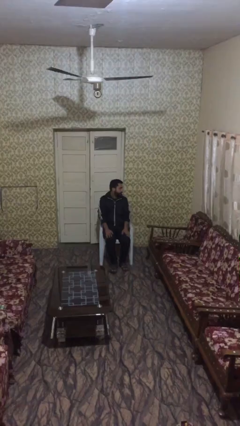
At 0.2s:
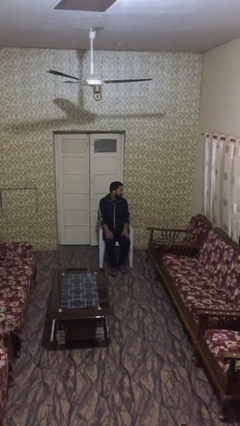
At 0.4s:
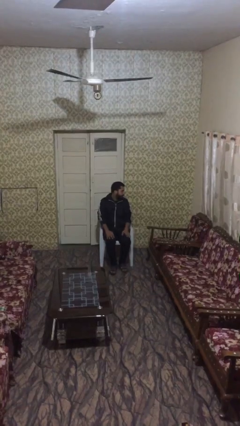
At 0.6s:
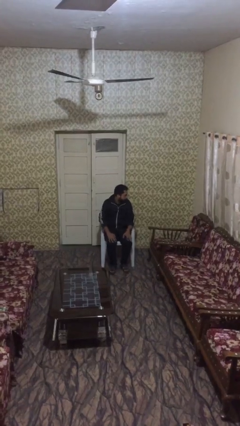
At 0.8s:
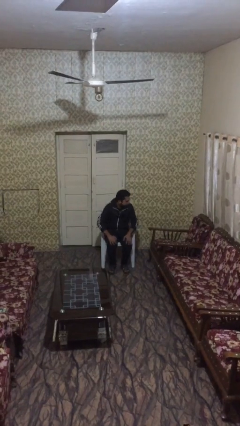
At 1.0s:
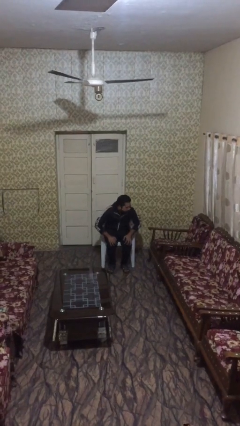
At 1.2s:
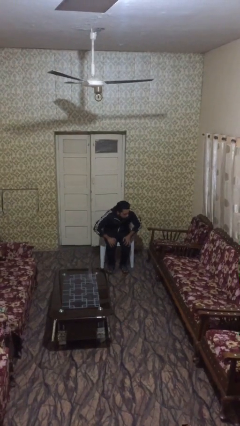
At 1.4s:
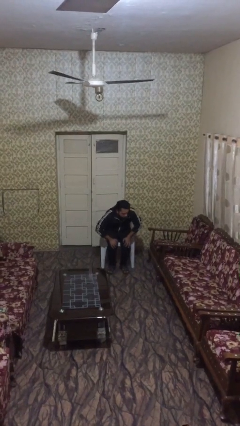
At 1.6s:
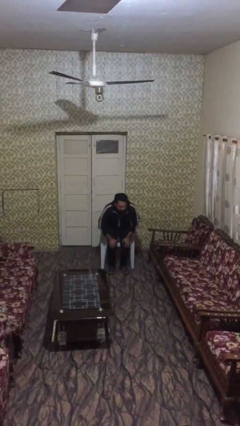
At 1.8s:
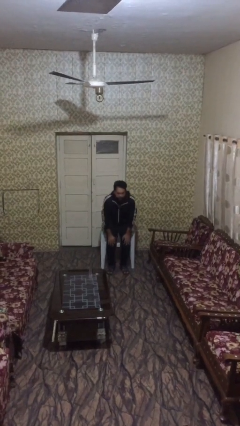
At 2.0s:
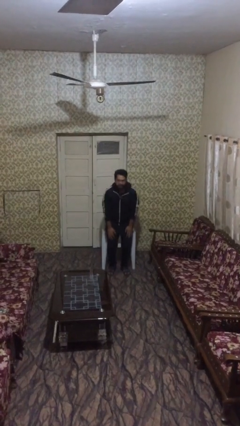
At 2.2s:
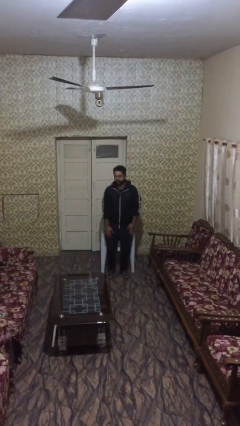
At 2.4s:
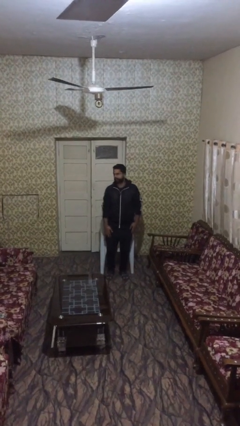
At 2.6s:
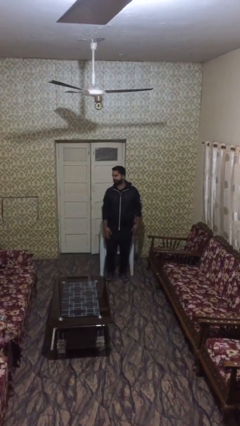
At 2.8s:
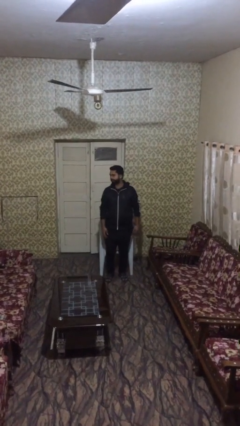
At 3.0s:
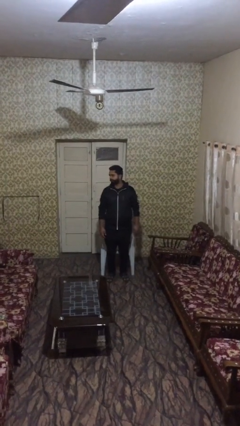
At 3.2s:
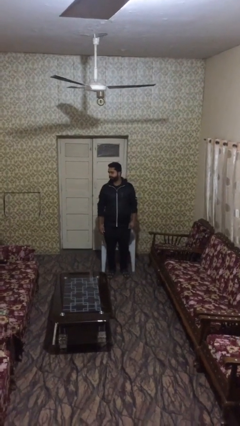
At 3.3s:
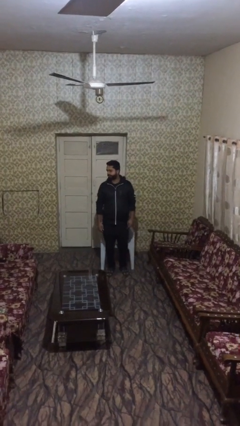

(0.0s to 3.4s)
person stands up

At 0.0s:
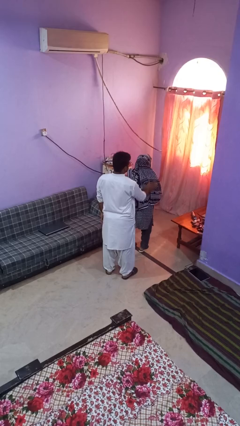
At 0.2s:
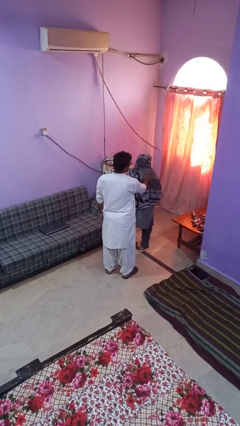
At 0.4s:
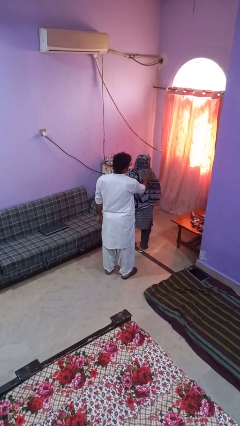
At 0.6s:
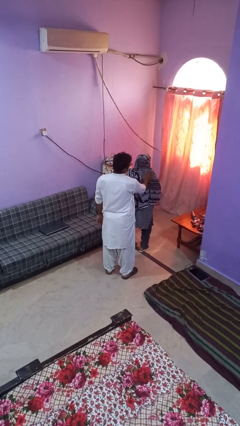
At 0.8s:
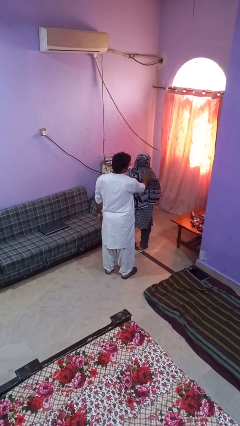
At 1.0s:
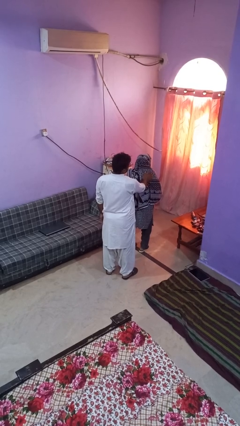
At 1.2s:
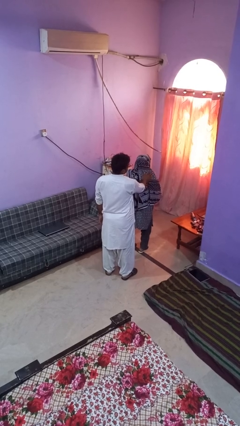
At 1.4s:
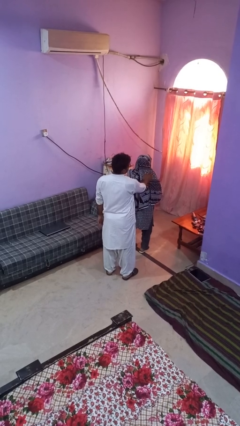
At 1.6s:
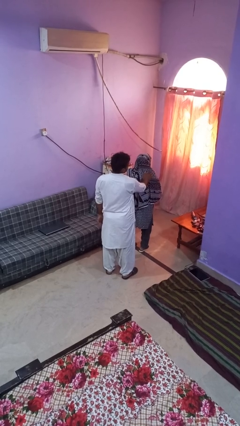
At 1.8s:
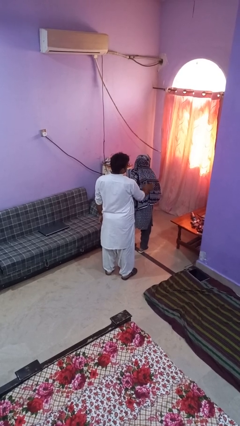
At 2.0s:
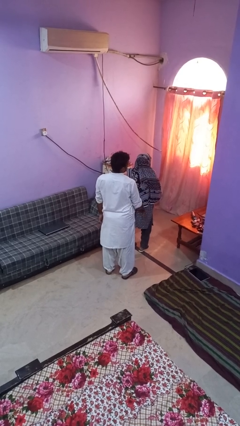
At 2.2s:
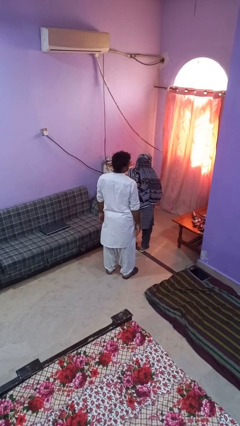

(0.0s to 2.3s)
person touches back of person

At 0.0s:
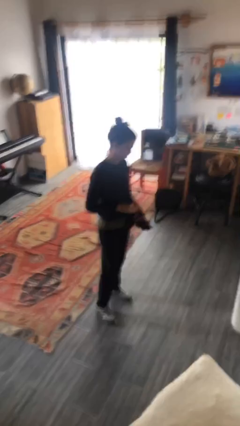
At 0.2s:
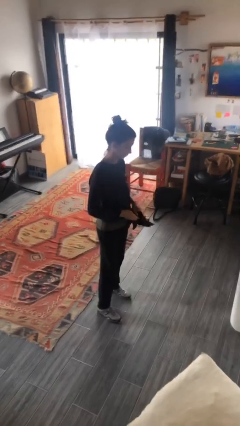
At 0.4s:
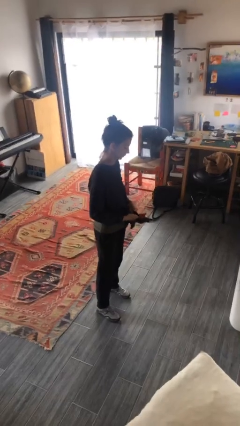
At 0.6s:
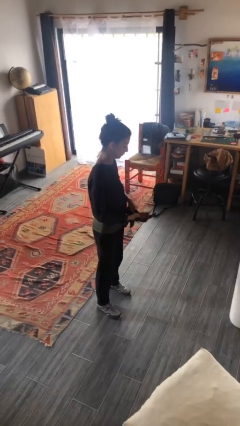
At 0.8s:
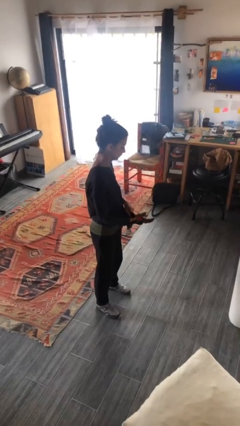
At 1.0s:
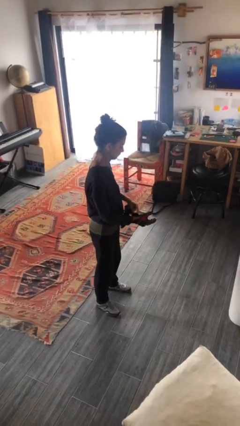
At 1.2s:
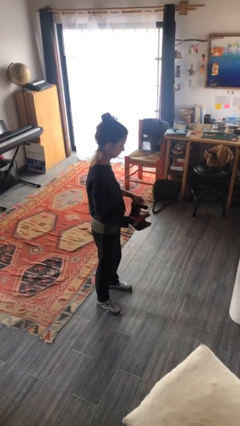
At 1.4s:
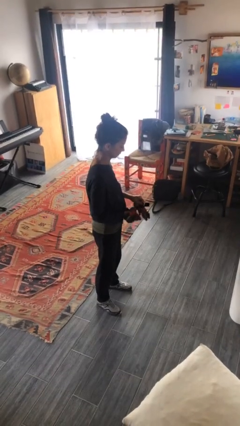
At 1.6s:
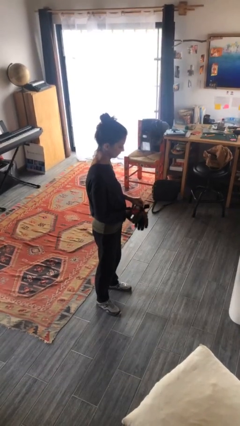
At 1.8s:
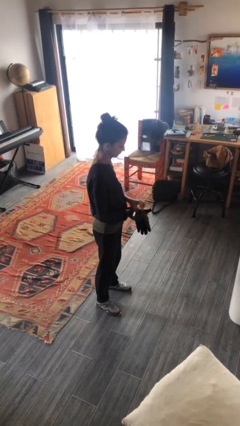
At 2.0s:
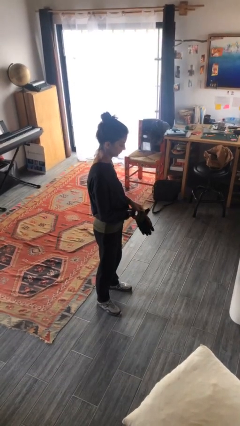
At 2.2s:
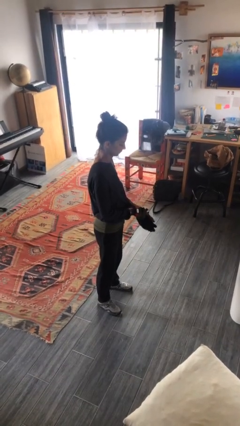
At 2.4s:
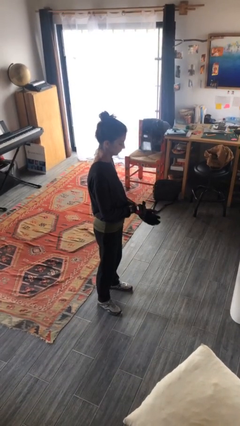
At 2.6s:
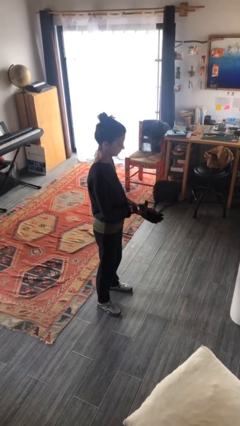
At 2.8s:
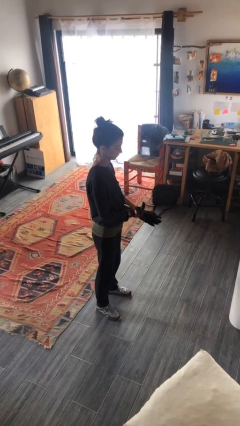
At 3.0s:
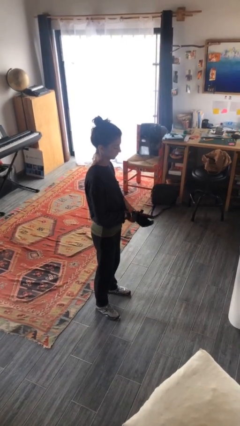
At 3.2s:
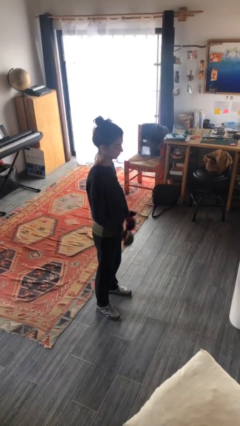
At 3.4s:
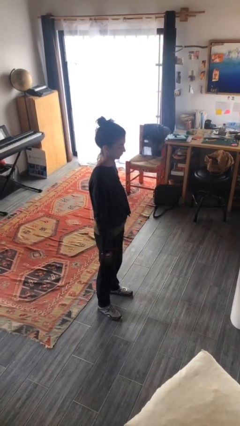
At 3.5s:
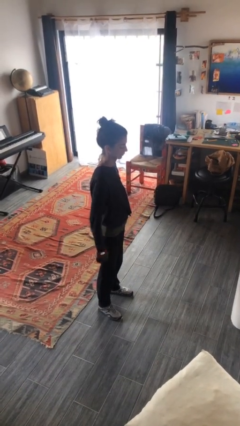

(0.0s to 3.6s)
person puts on gloves

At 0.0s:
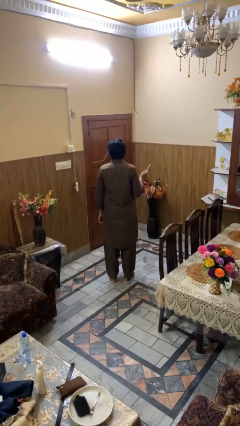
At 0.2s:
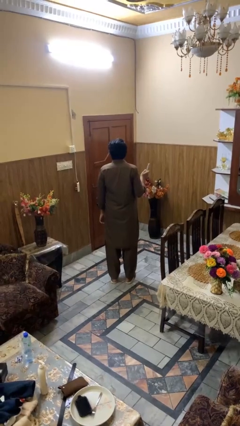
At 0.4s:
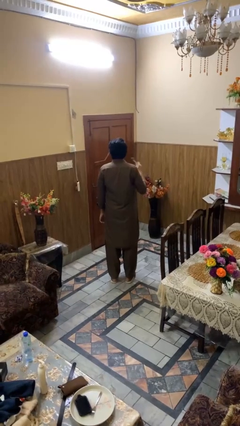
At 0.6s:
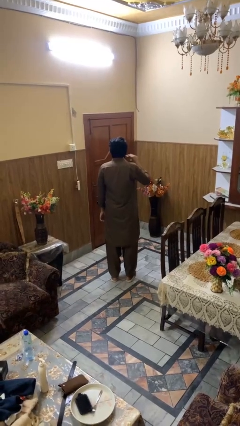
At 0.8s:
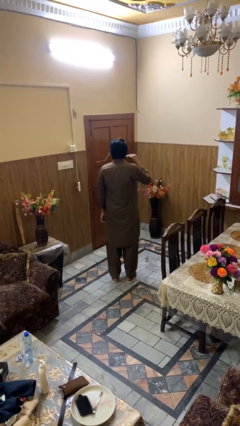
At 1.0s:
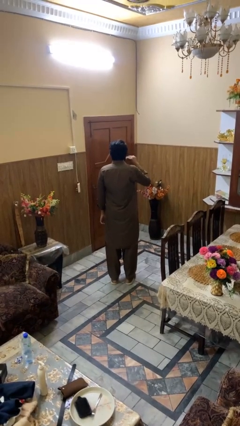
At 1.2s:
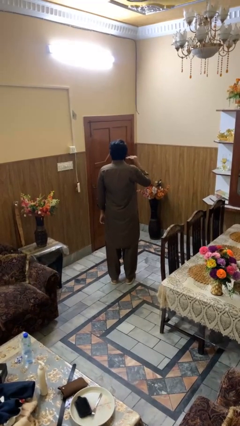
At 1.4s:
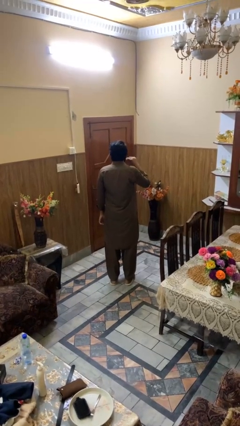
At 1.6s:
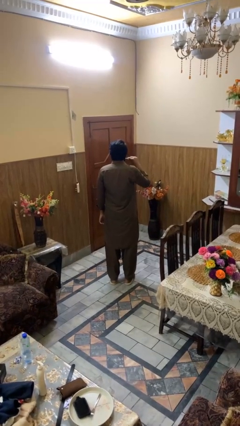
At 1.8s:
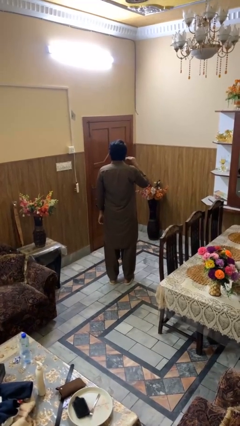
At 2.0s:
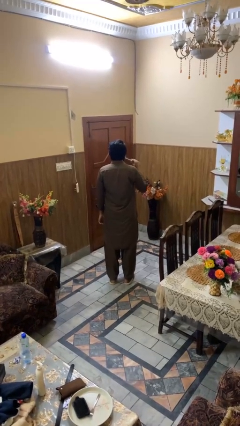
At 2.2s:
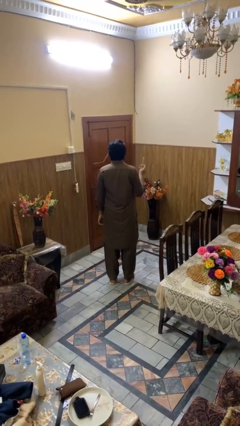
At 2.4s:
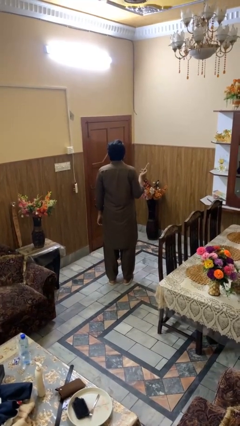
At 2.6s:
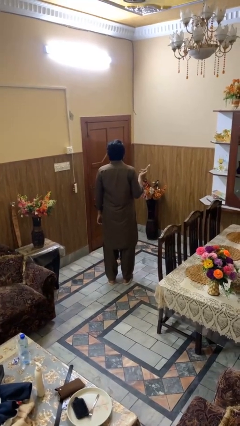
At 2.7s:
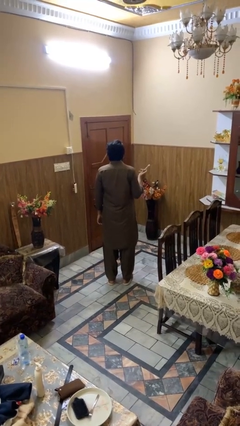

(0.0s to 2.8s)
person brushes teeth

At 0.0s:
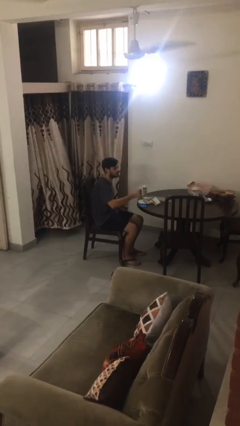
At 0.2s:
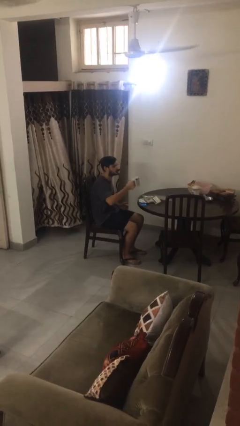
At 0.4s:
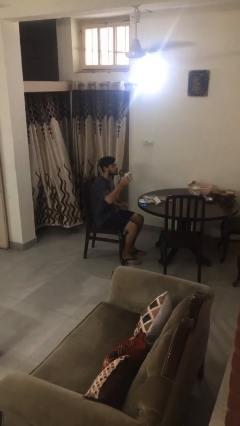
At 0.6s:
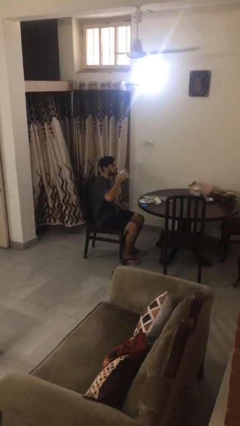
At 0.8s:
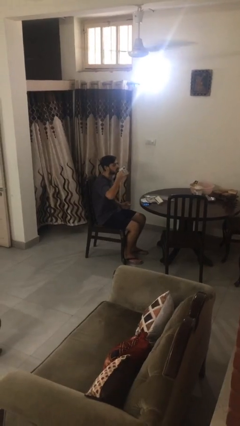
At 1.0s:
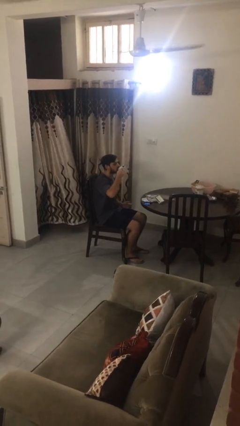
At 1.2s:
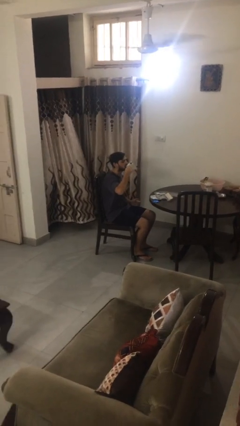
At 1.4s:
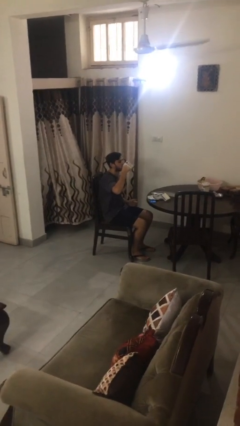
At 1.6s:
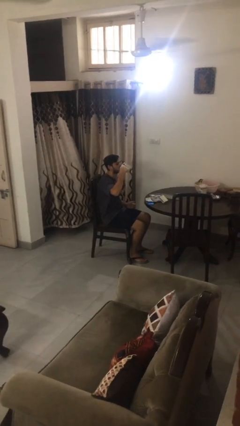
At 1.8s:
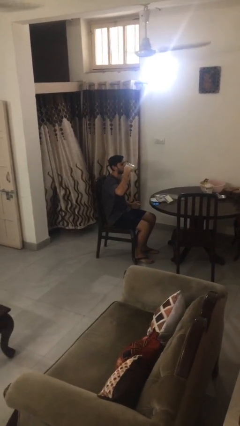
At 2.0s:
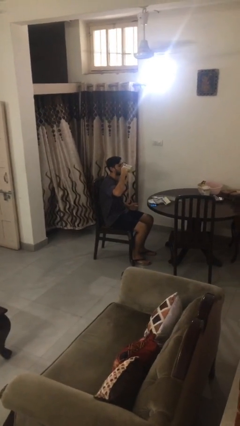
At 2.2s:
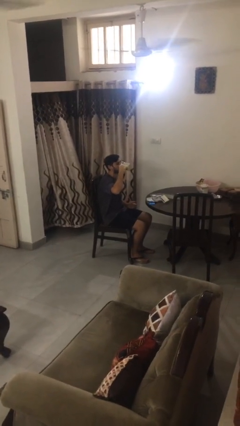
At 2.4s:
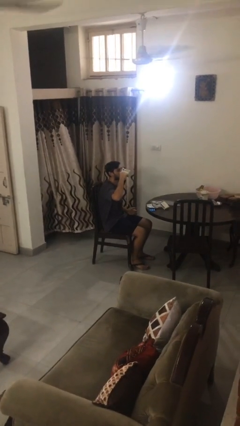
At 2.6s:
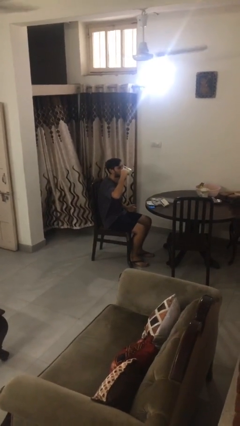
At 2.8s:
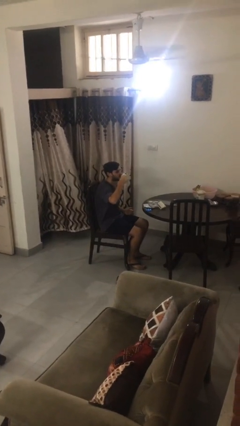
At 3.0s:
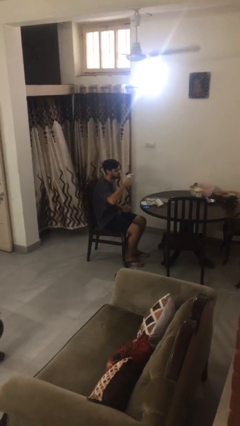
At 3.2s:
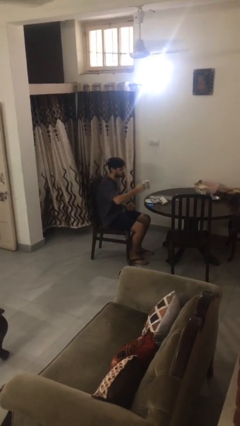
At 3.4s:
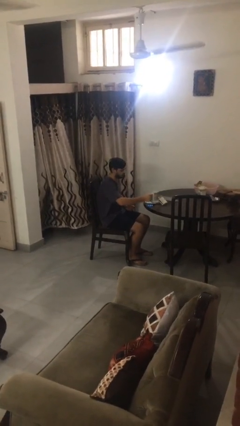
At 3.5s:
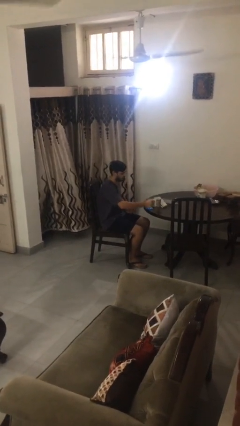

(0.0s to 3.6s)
person drinks from cup

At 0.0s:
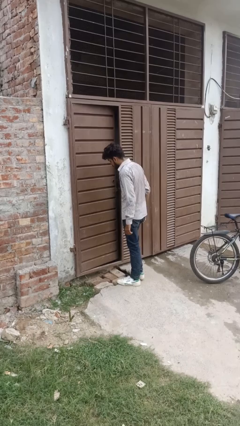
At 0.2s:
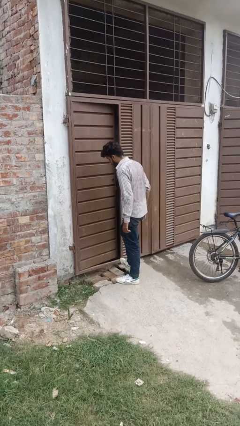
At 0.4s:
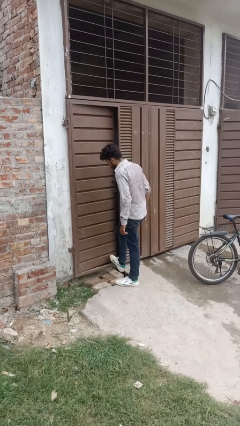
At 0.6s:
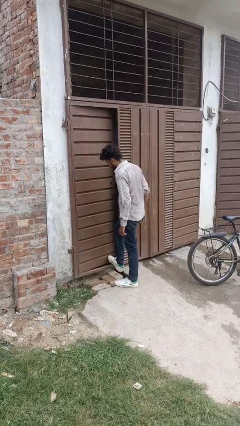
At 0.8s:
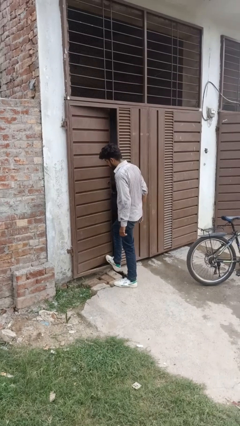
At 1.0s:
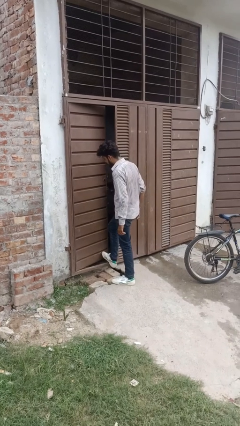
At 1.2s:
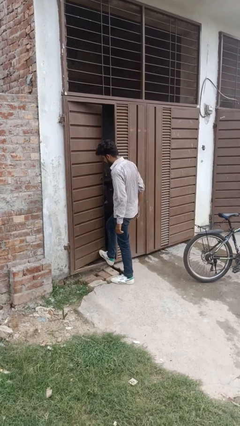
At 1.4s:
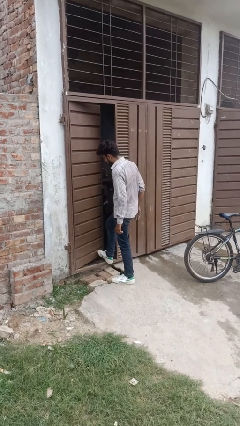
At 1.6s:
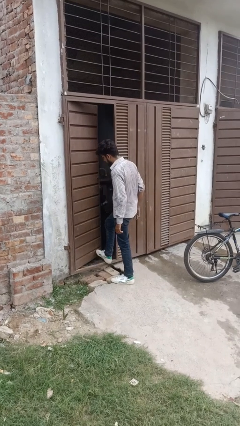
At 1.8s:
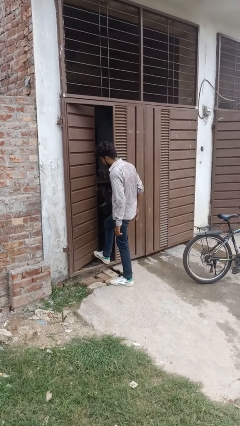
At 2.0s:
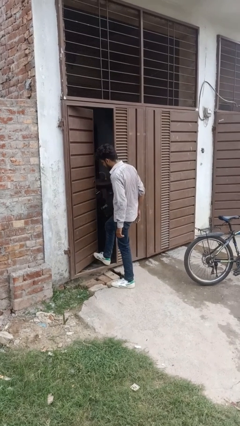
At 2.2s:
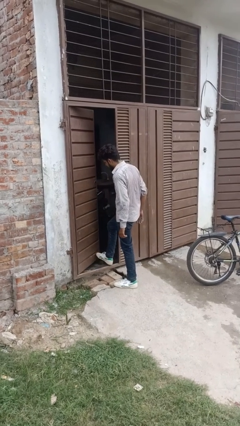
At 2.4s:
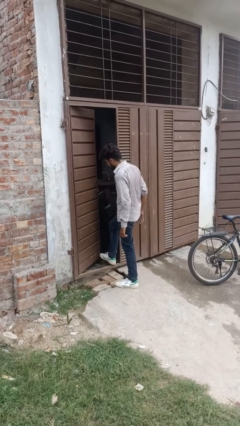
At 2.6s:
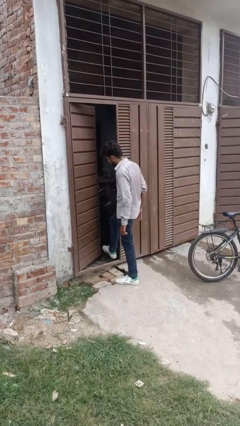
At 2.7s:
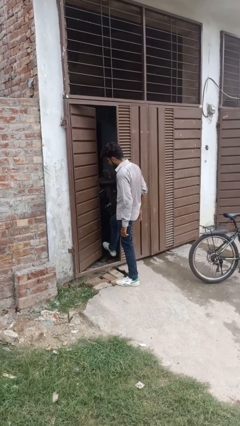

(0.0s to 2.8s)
person opens facility door
